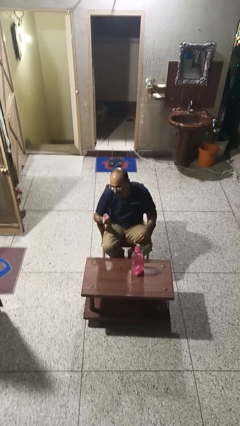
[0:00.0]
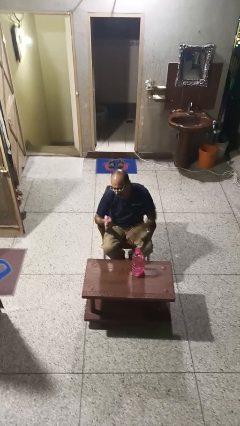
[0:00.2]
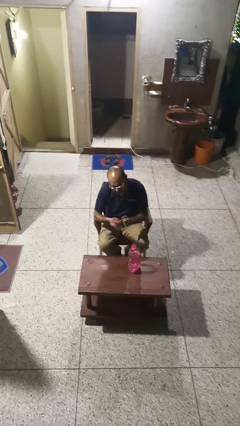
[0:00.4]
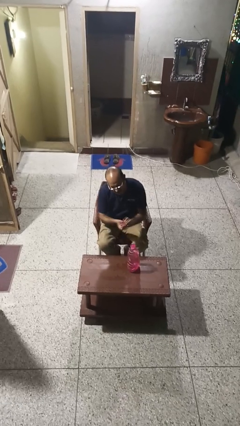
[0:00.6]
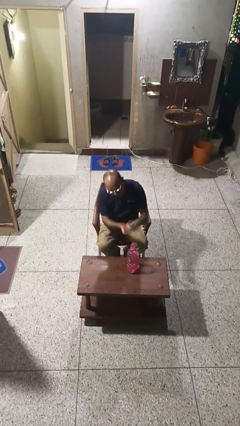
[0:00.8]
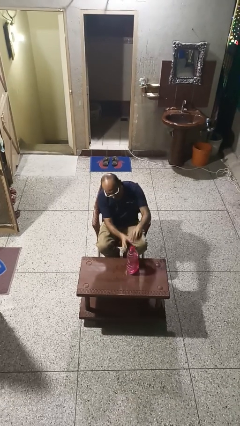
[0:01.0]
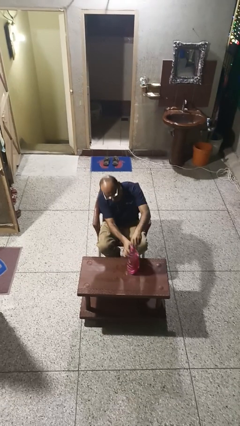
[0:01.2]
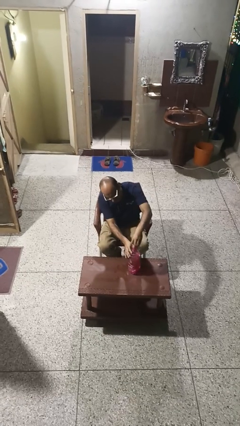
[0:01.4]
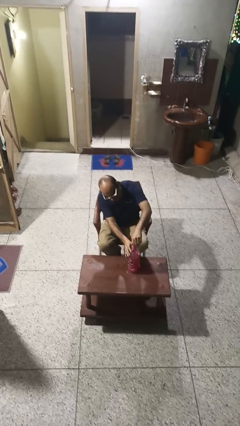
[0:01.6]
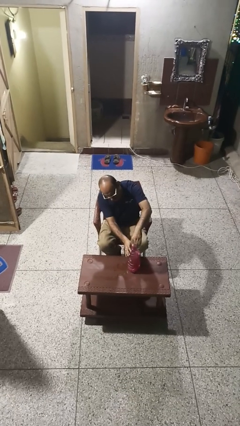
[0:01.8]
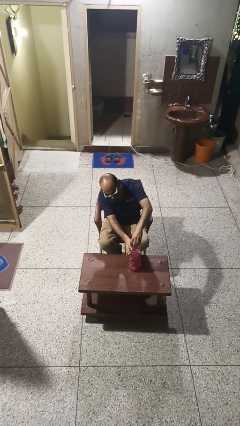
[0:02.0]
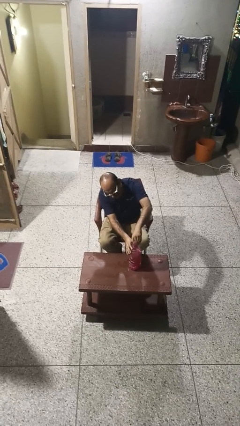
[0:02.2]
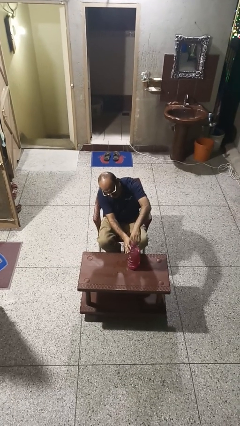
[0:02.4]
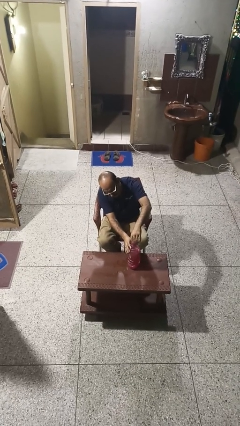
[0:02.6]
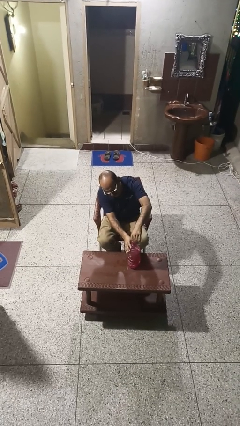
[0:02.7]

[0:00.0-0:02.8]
person screws lid to bottle

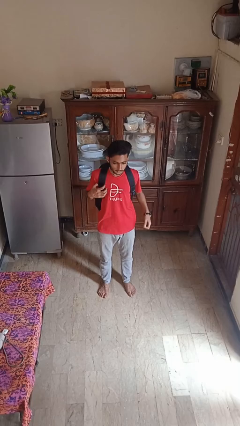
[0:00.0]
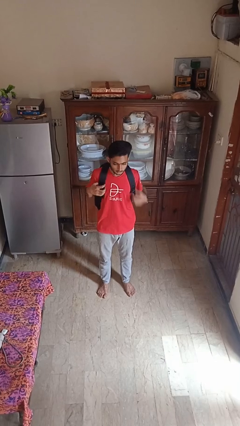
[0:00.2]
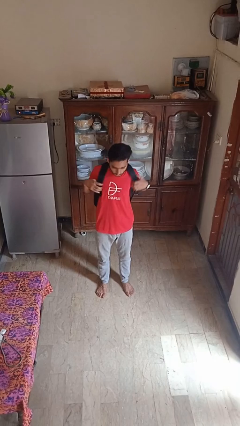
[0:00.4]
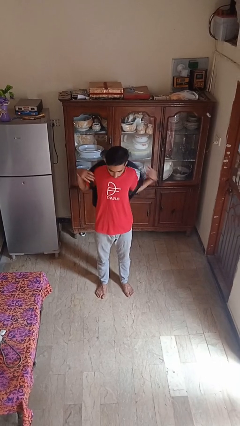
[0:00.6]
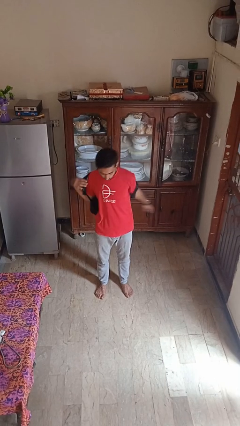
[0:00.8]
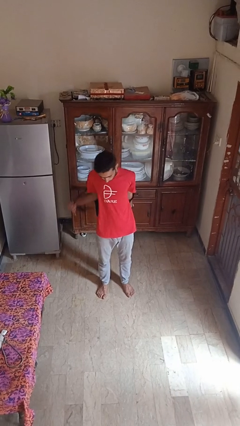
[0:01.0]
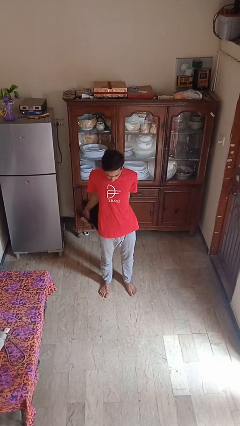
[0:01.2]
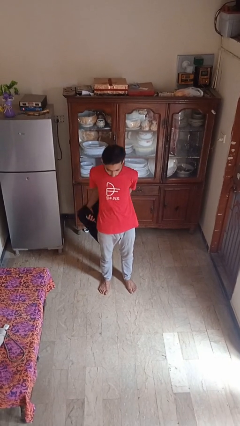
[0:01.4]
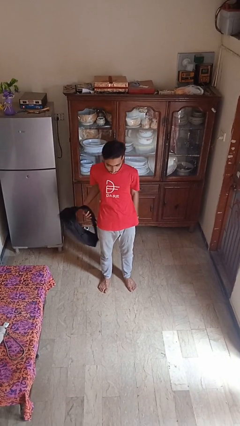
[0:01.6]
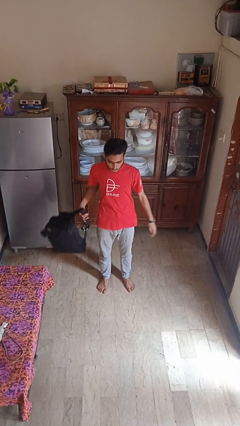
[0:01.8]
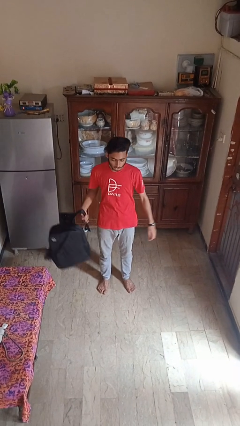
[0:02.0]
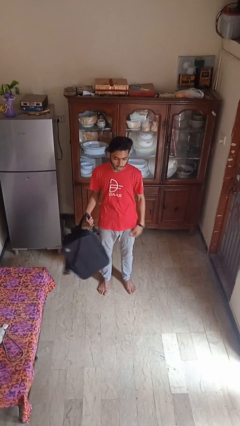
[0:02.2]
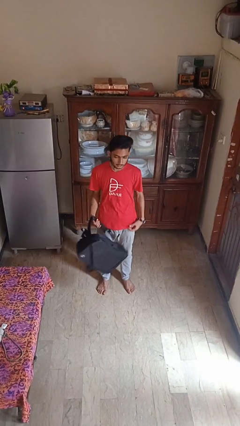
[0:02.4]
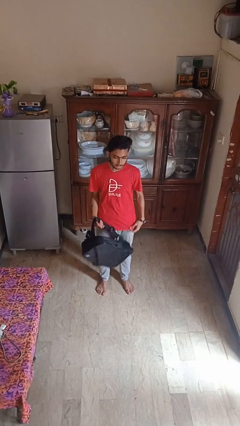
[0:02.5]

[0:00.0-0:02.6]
person takes off backpack

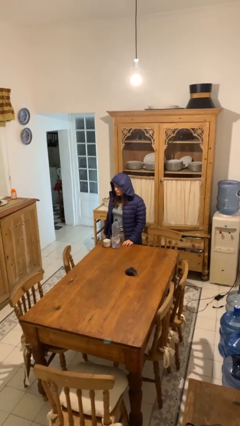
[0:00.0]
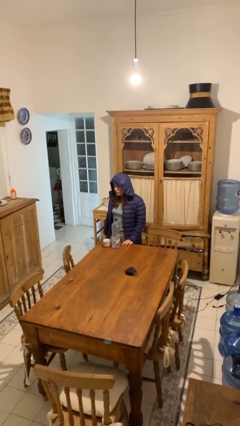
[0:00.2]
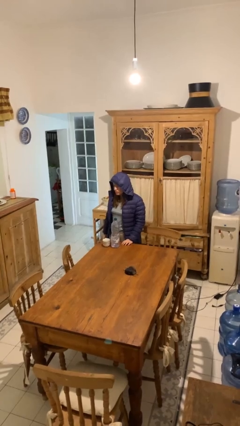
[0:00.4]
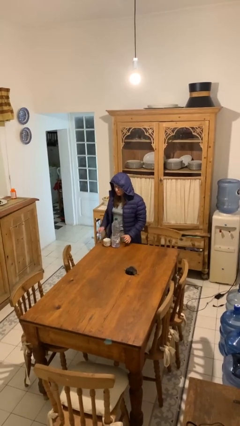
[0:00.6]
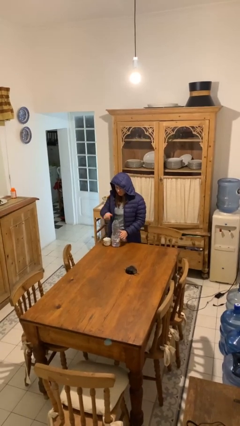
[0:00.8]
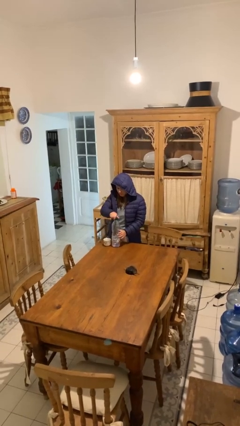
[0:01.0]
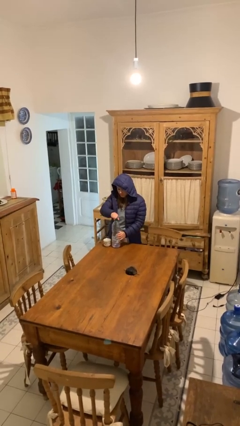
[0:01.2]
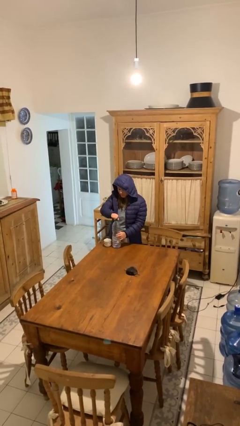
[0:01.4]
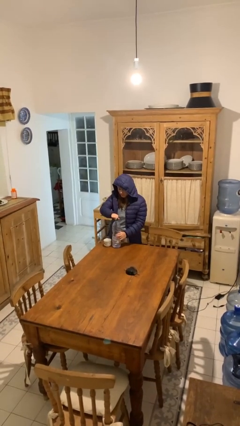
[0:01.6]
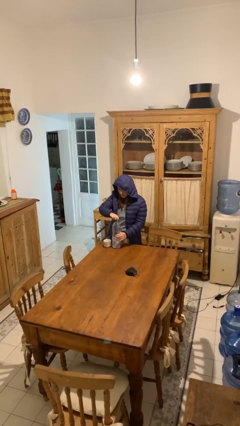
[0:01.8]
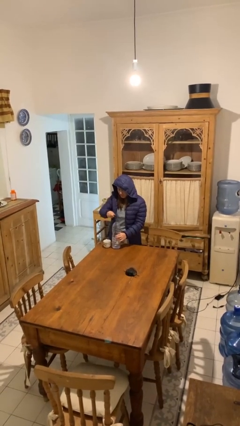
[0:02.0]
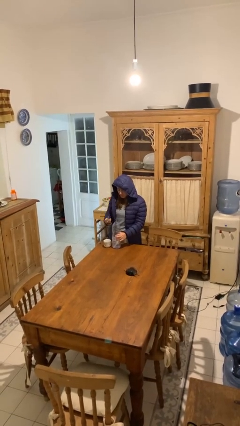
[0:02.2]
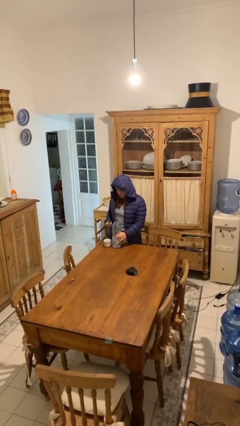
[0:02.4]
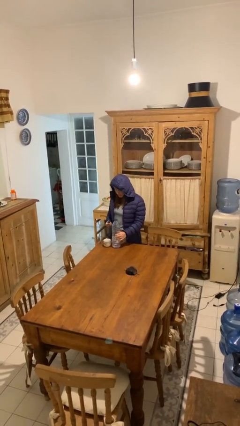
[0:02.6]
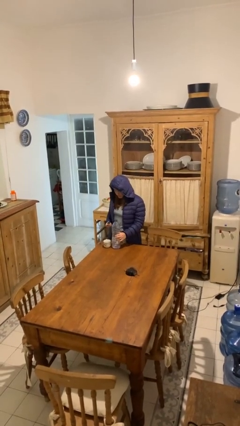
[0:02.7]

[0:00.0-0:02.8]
person unscrews lid from bottle

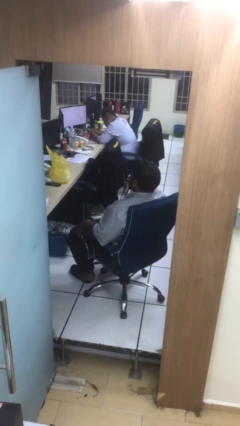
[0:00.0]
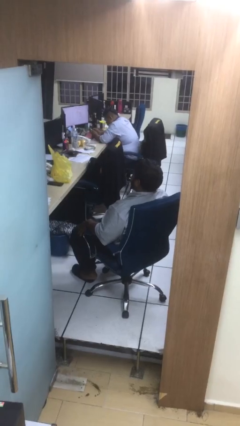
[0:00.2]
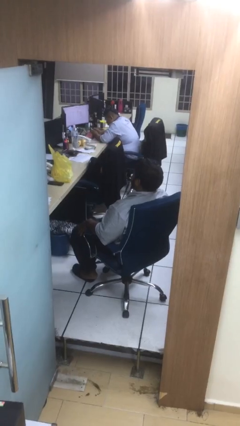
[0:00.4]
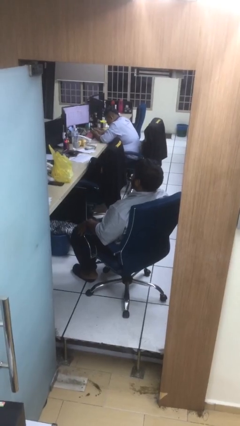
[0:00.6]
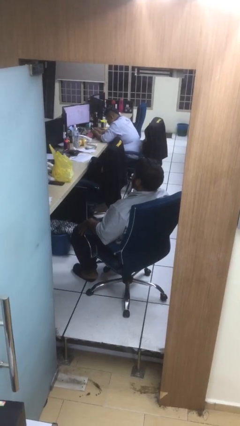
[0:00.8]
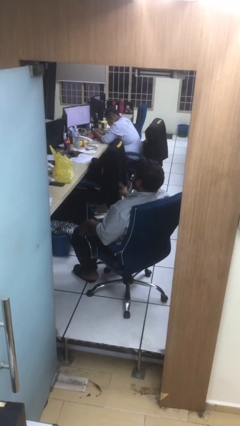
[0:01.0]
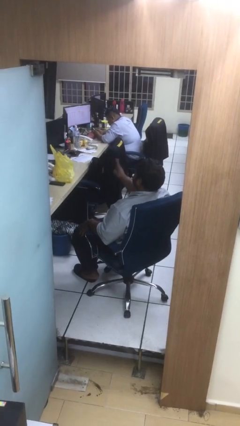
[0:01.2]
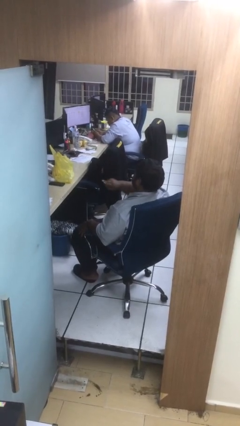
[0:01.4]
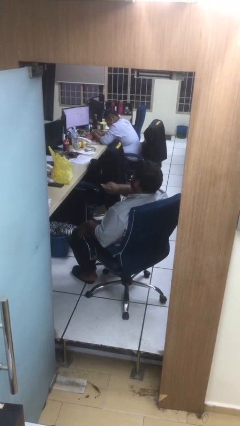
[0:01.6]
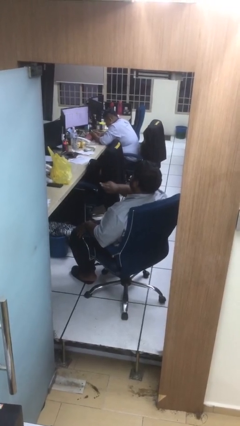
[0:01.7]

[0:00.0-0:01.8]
person gestures swipe left

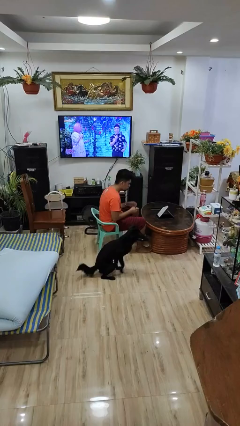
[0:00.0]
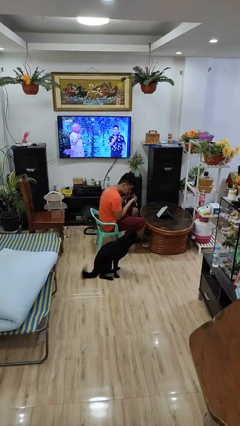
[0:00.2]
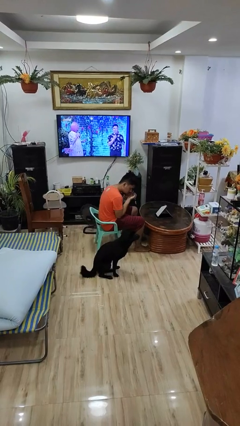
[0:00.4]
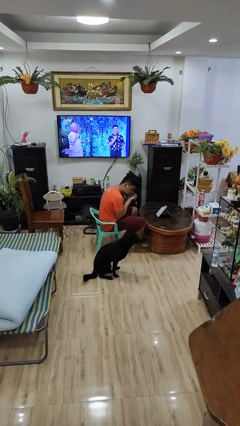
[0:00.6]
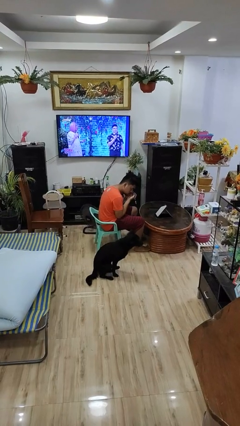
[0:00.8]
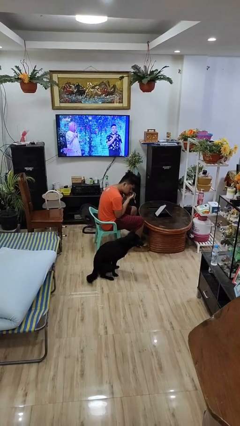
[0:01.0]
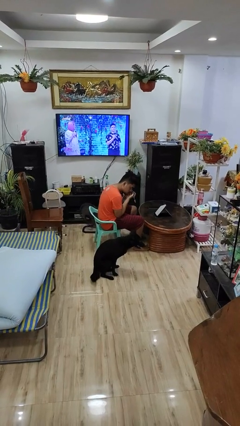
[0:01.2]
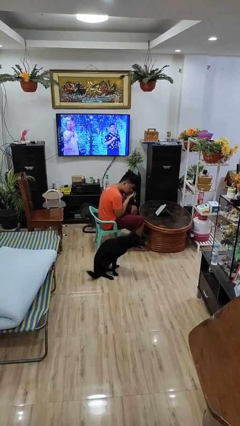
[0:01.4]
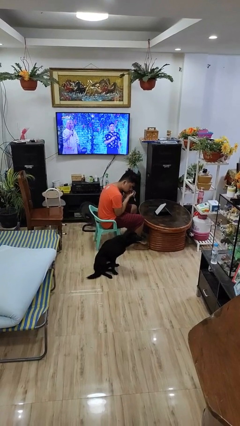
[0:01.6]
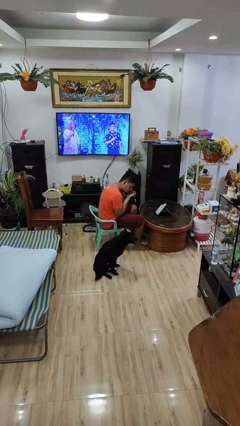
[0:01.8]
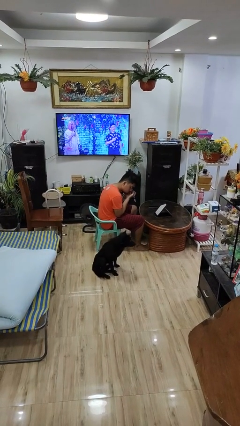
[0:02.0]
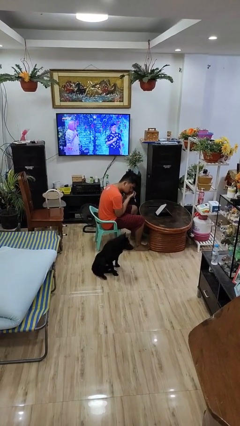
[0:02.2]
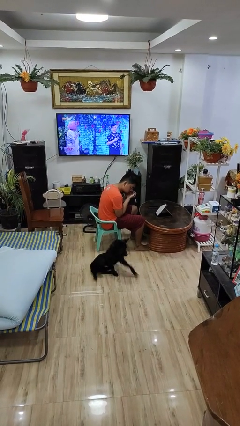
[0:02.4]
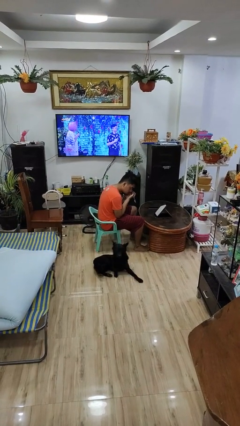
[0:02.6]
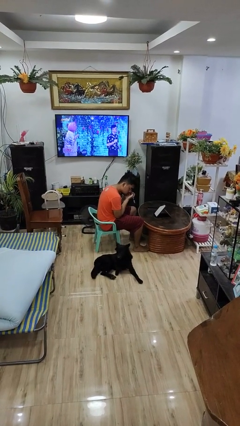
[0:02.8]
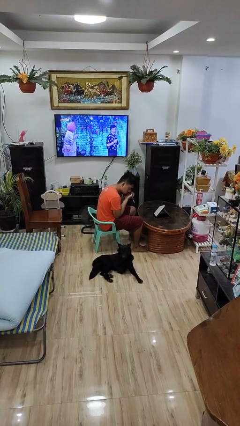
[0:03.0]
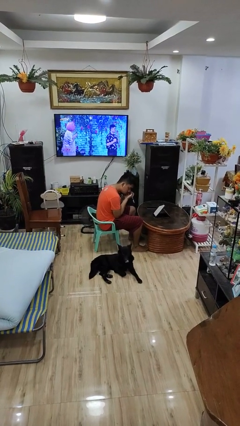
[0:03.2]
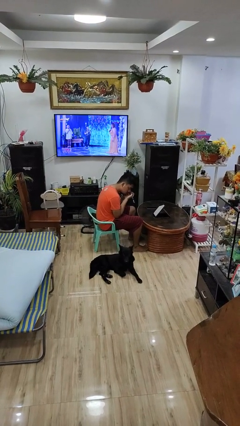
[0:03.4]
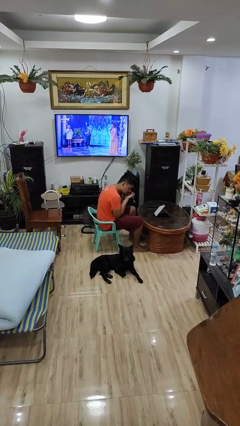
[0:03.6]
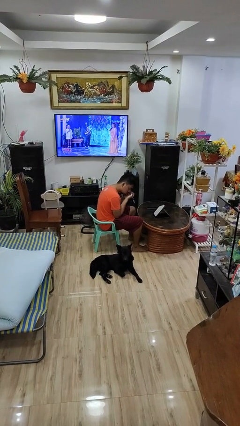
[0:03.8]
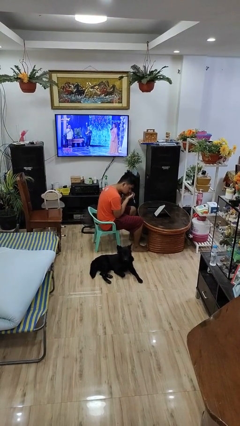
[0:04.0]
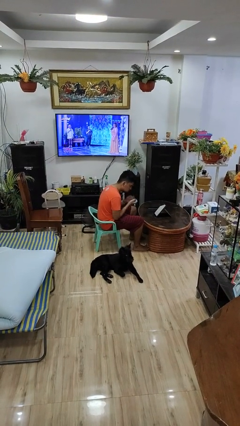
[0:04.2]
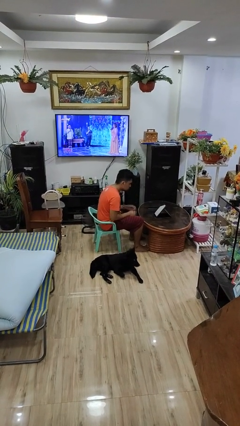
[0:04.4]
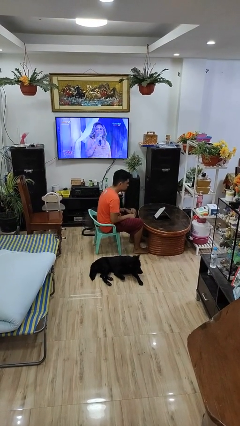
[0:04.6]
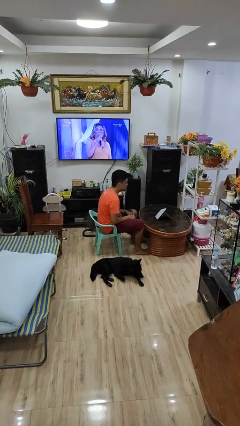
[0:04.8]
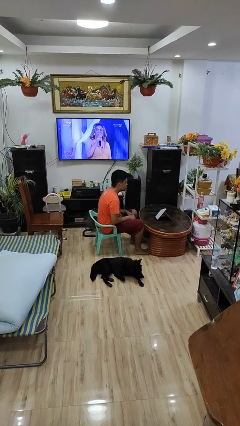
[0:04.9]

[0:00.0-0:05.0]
person applies eye makeup

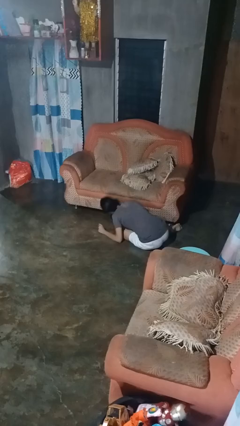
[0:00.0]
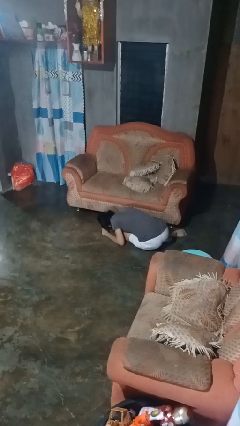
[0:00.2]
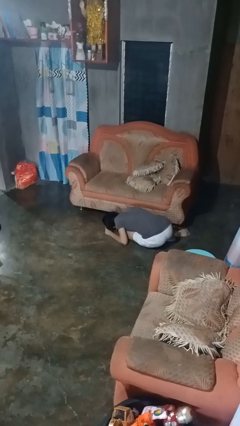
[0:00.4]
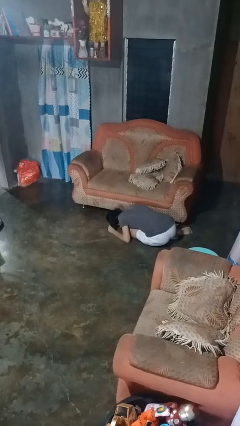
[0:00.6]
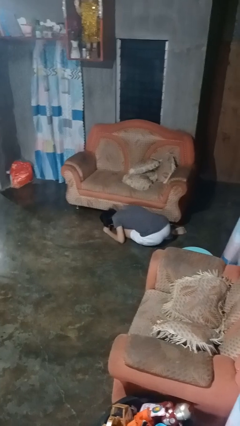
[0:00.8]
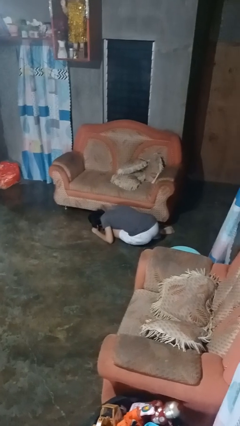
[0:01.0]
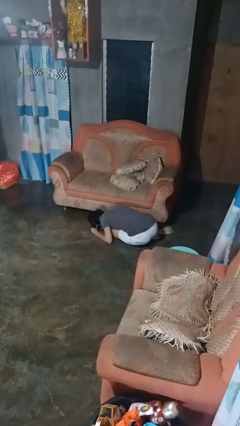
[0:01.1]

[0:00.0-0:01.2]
person searches under couch

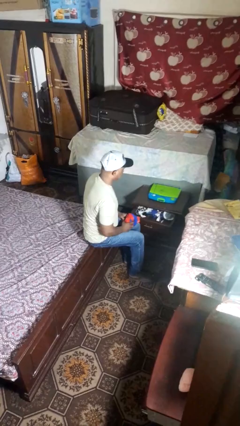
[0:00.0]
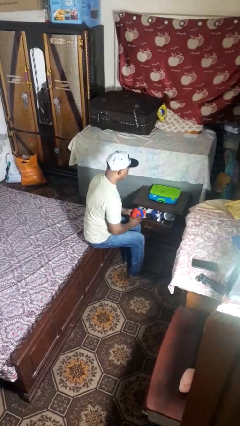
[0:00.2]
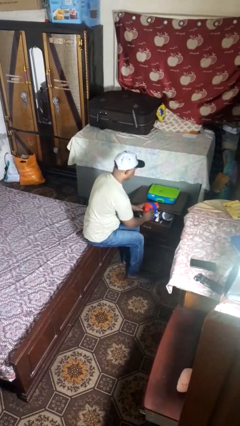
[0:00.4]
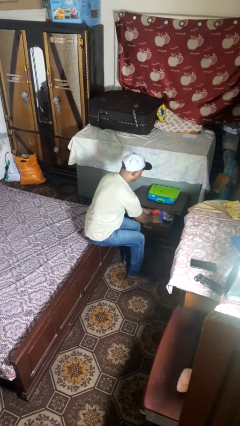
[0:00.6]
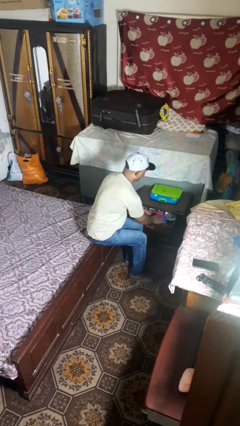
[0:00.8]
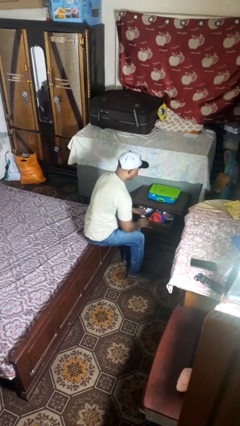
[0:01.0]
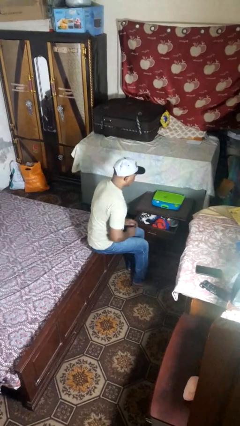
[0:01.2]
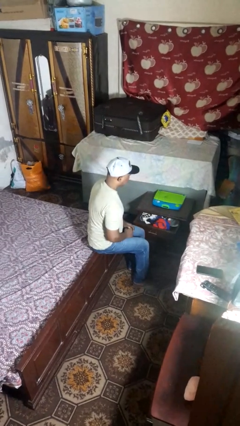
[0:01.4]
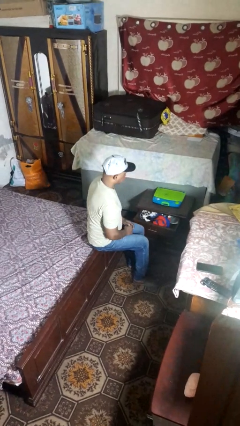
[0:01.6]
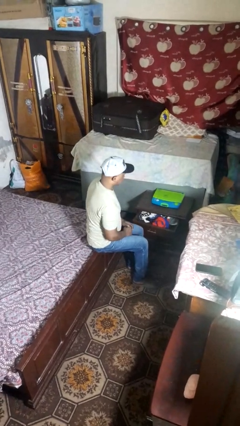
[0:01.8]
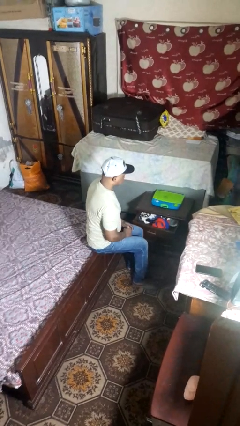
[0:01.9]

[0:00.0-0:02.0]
person puts clothes into dresser
